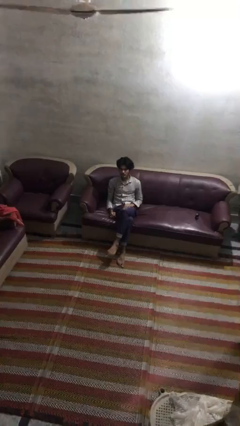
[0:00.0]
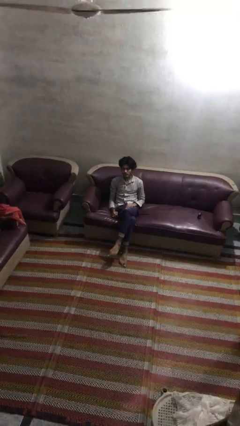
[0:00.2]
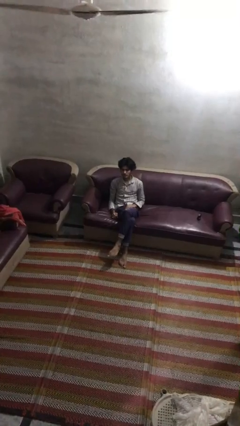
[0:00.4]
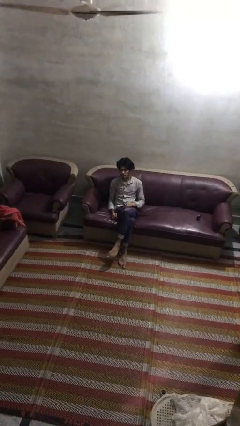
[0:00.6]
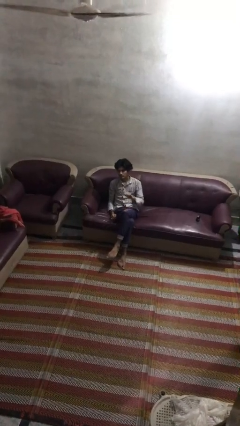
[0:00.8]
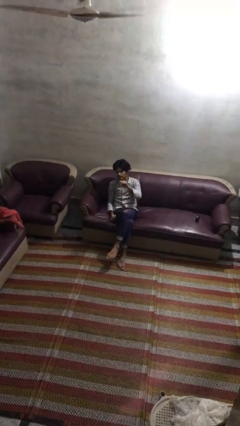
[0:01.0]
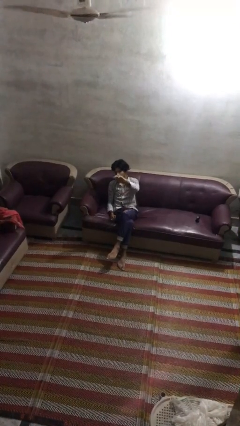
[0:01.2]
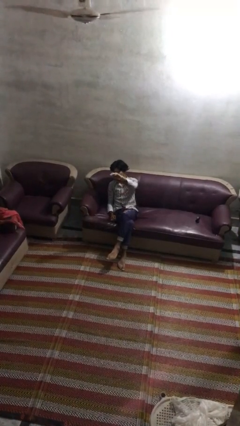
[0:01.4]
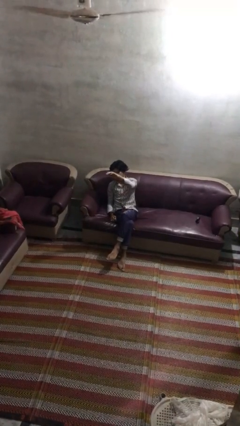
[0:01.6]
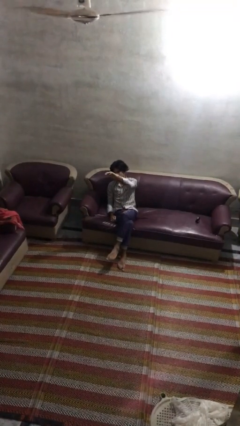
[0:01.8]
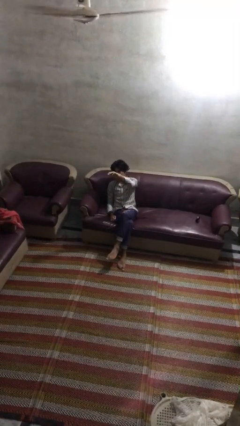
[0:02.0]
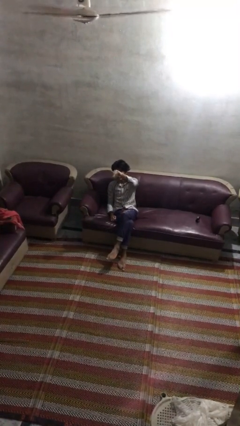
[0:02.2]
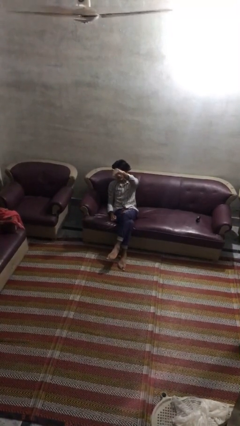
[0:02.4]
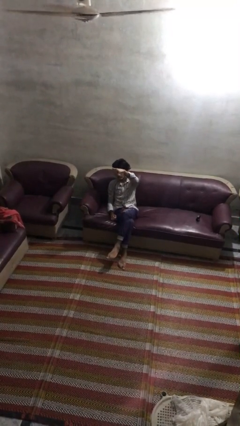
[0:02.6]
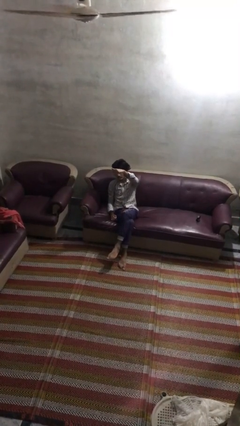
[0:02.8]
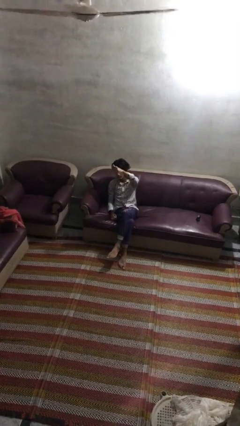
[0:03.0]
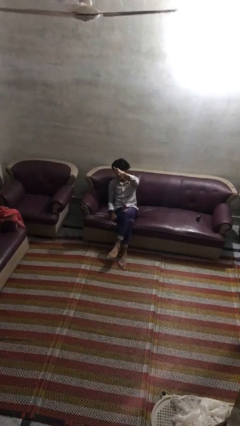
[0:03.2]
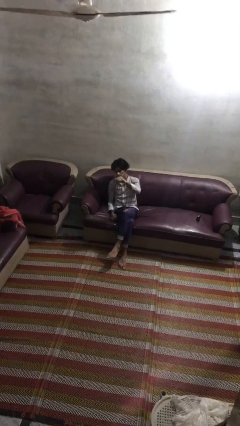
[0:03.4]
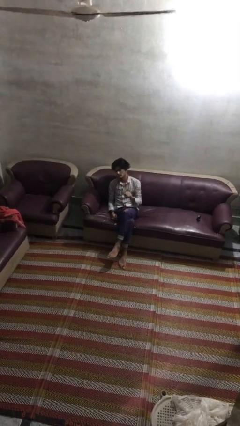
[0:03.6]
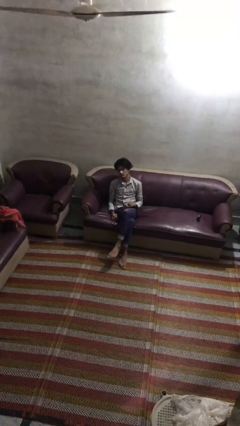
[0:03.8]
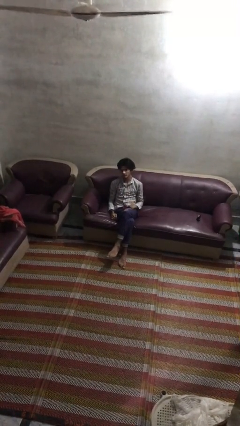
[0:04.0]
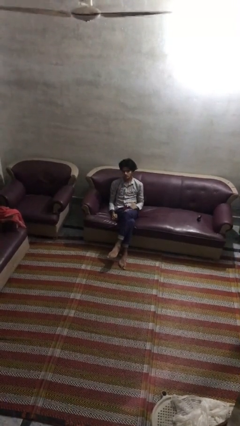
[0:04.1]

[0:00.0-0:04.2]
person gestures come here

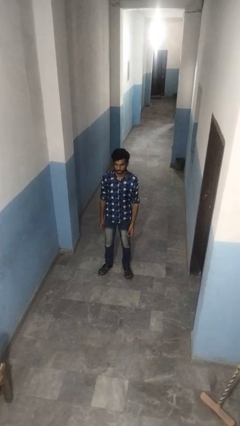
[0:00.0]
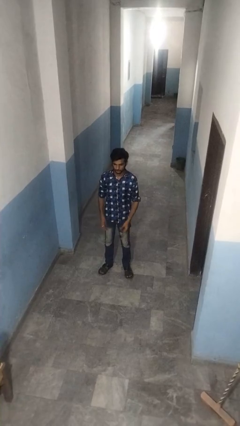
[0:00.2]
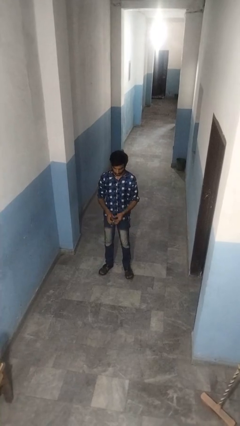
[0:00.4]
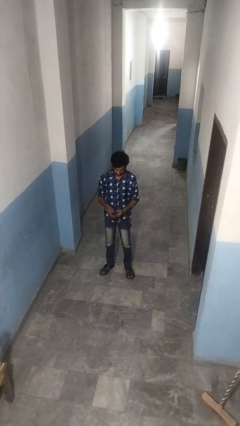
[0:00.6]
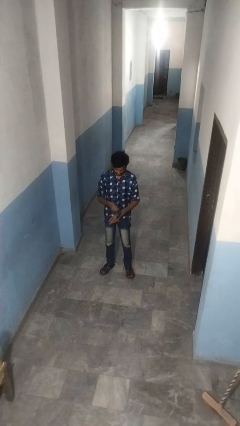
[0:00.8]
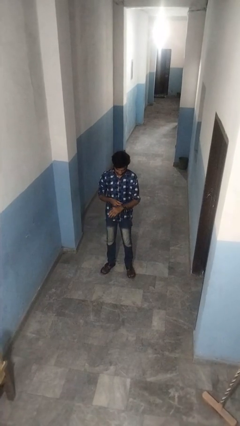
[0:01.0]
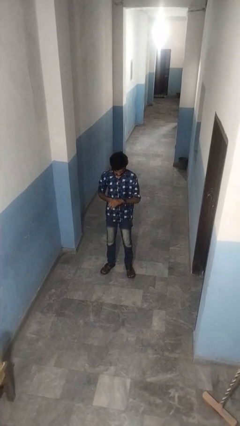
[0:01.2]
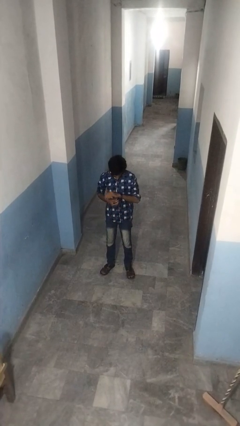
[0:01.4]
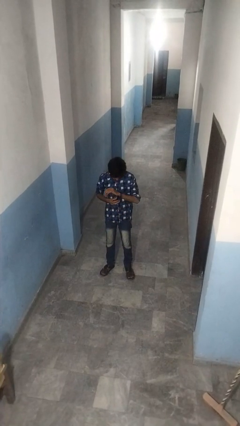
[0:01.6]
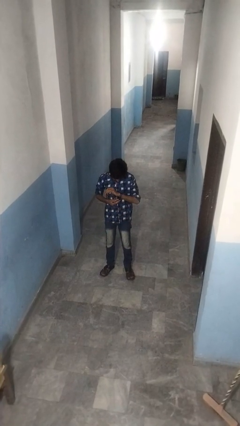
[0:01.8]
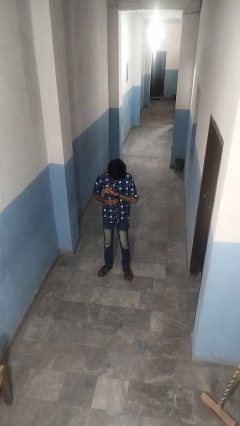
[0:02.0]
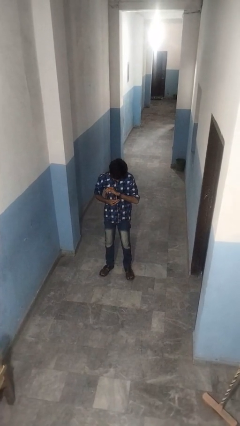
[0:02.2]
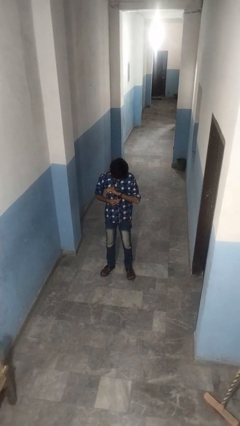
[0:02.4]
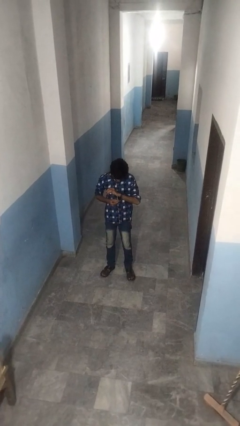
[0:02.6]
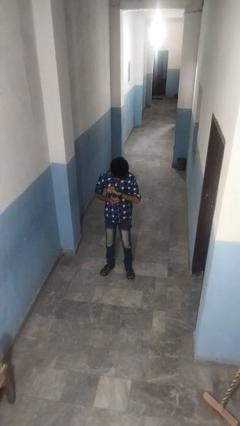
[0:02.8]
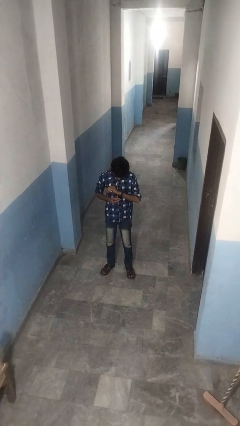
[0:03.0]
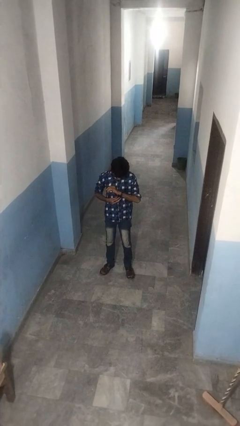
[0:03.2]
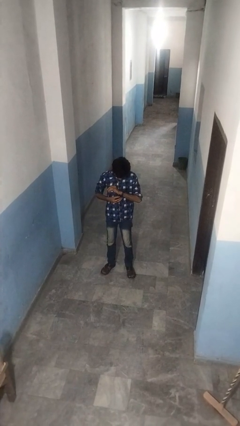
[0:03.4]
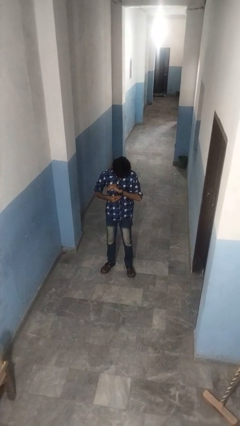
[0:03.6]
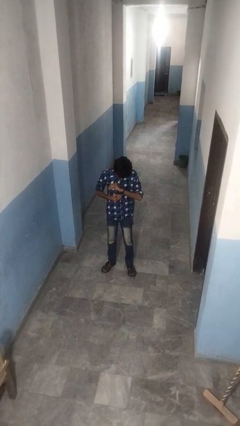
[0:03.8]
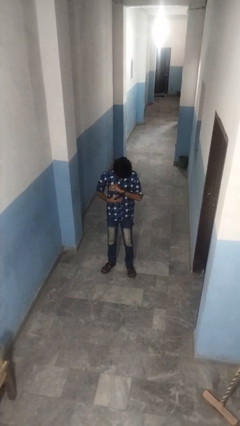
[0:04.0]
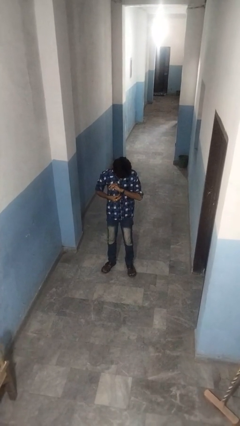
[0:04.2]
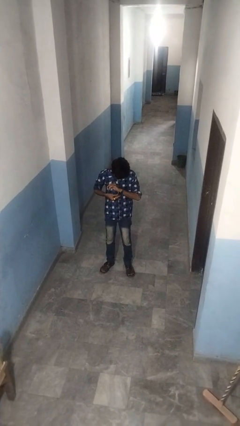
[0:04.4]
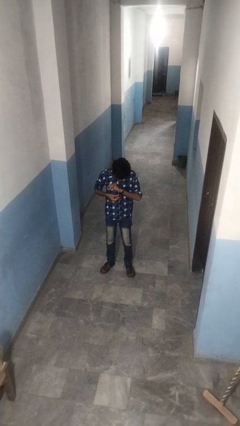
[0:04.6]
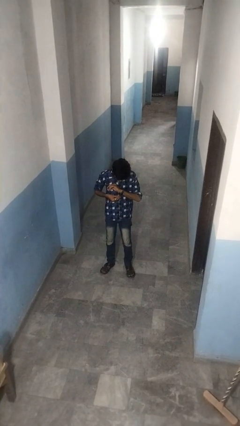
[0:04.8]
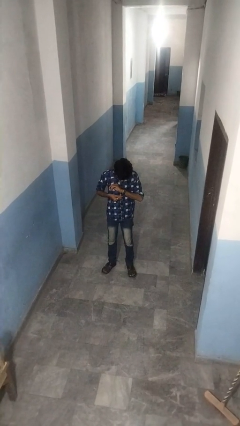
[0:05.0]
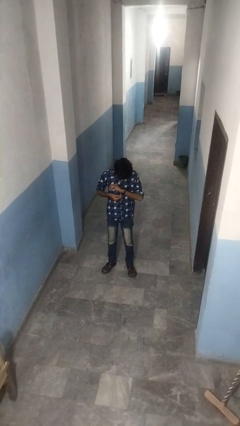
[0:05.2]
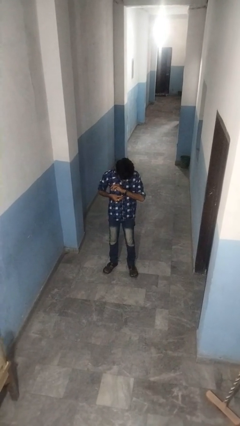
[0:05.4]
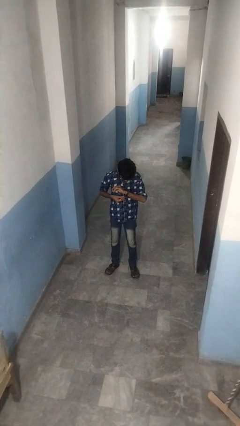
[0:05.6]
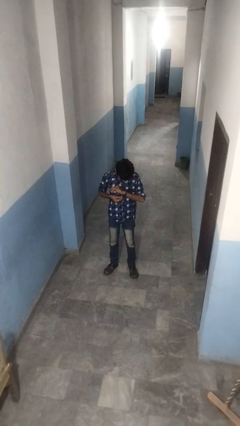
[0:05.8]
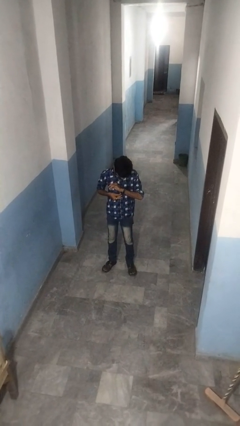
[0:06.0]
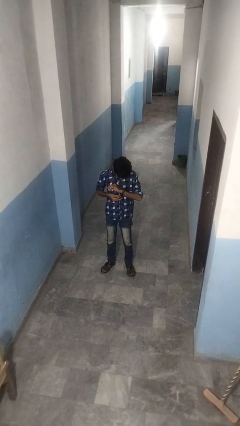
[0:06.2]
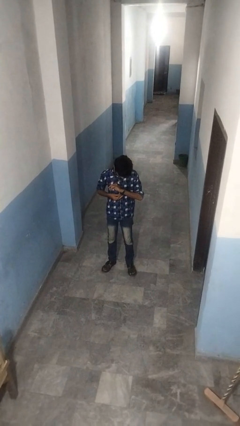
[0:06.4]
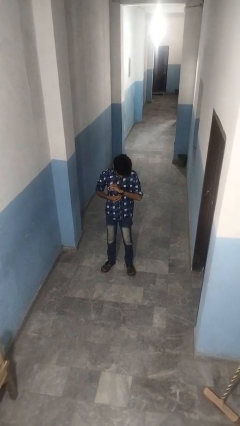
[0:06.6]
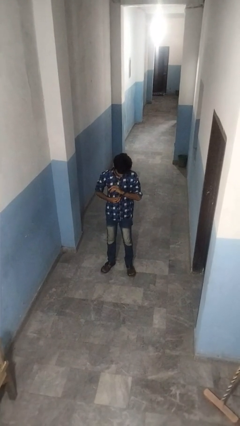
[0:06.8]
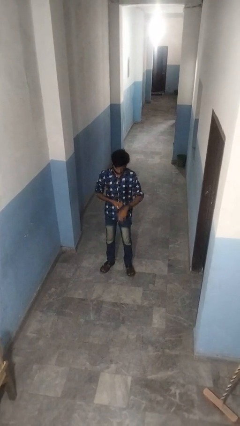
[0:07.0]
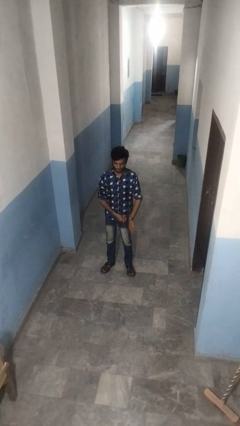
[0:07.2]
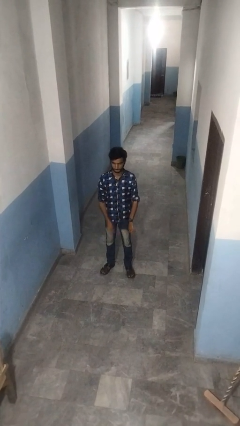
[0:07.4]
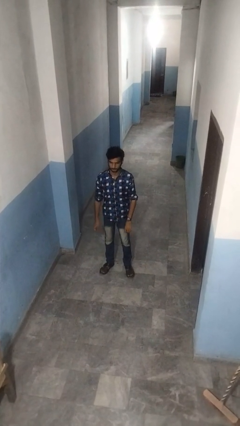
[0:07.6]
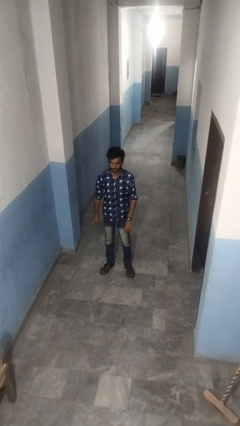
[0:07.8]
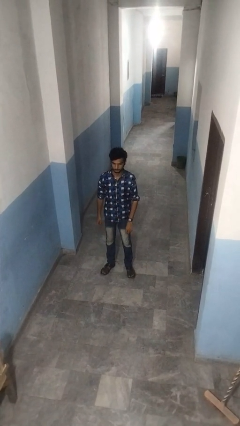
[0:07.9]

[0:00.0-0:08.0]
person puts on wristwatch

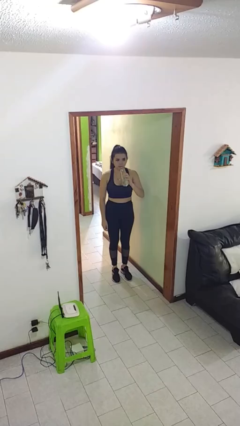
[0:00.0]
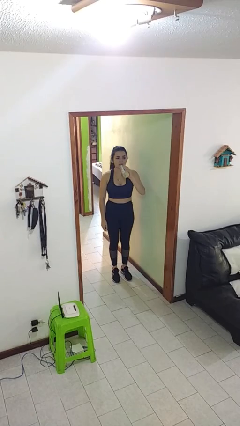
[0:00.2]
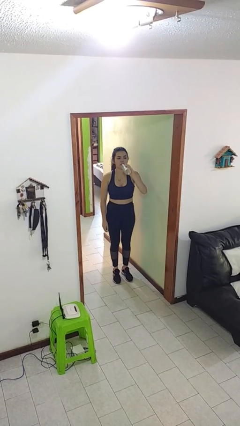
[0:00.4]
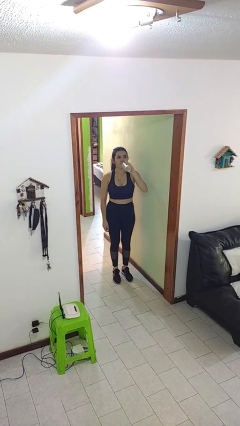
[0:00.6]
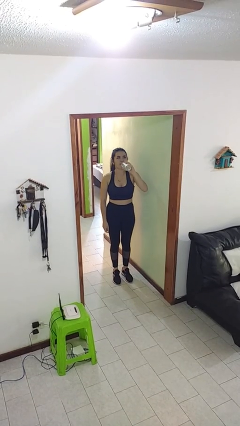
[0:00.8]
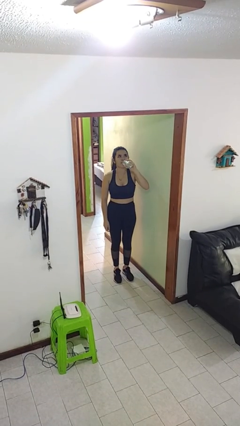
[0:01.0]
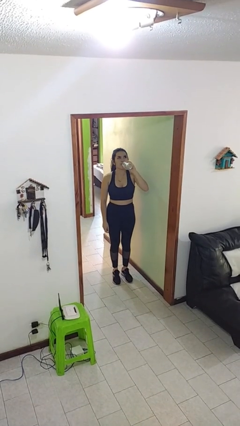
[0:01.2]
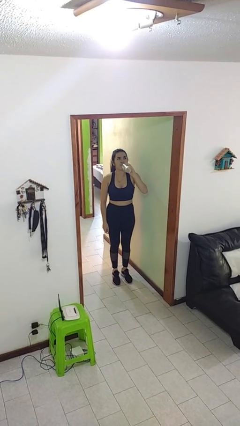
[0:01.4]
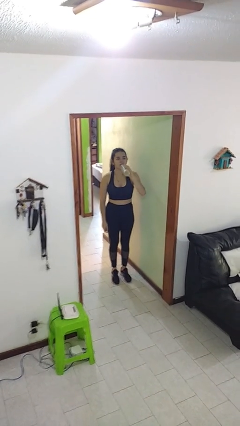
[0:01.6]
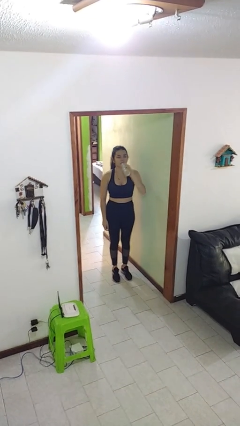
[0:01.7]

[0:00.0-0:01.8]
person drinks from bottle

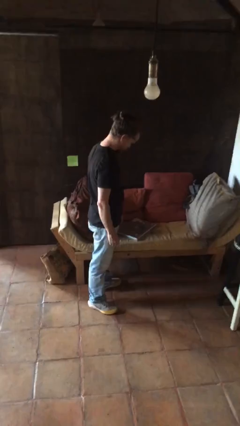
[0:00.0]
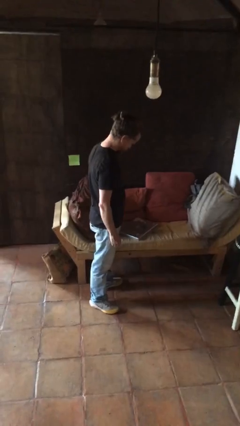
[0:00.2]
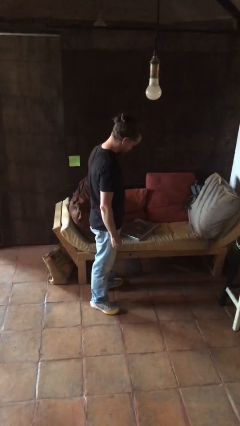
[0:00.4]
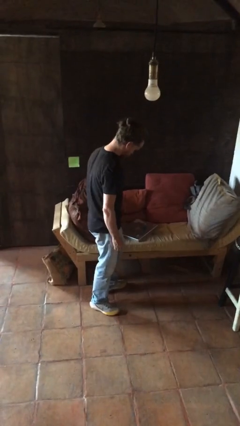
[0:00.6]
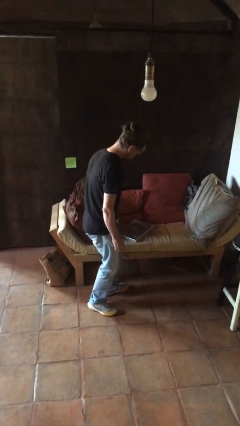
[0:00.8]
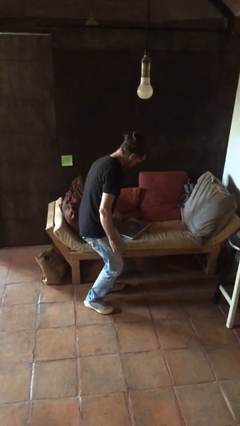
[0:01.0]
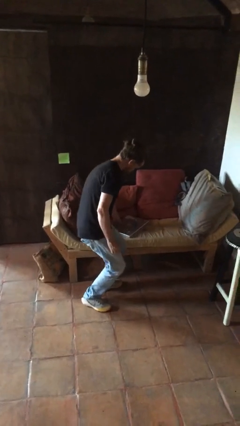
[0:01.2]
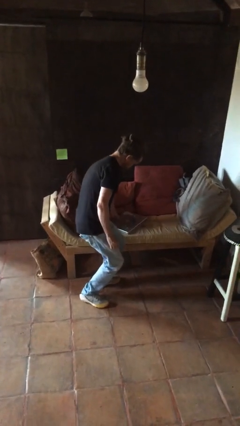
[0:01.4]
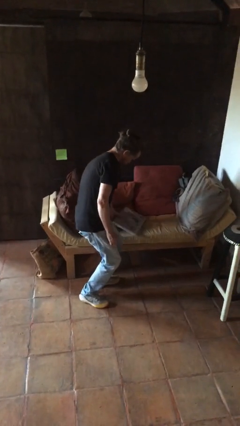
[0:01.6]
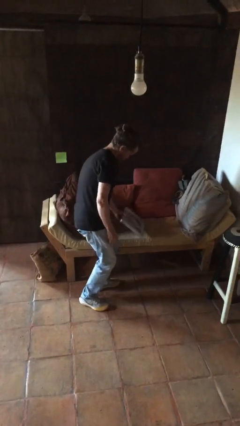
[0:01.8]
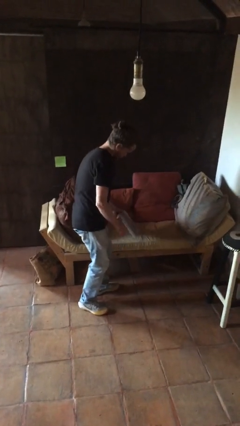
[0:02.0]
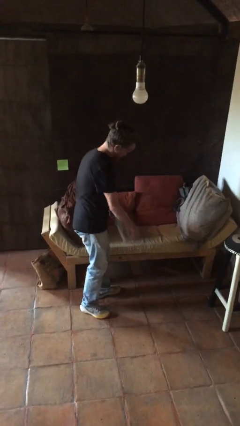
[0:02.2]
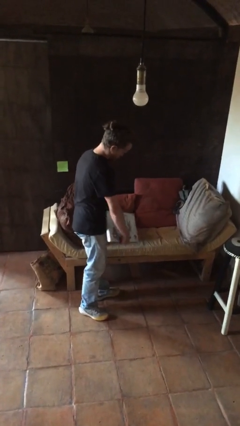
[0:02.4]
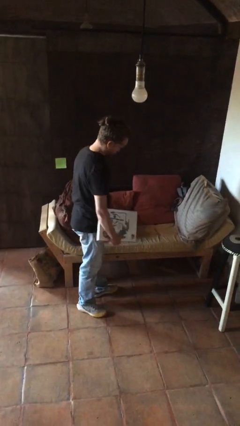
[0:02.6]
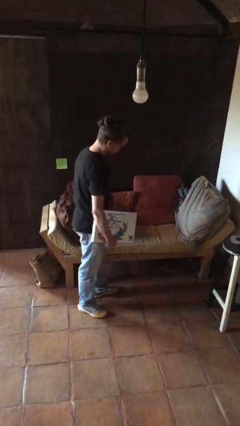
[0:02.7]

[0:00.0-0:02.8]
person picks up object from couch

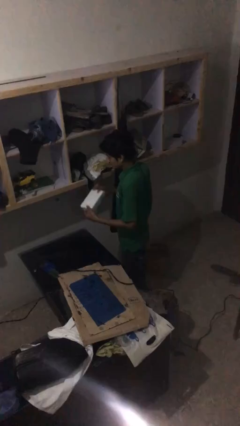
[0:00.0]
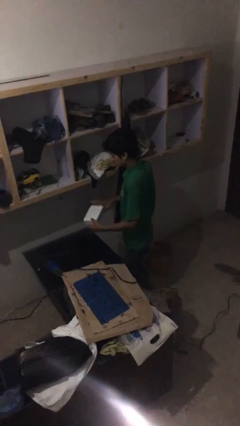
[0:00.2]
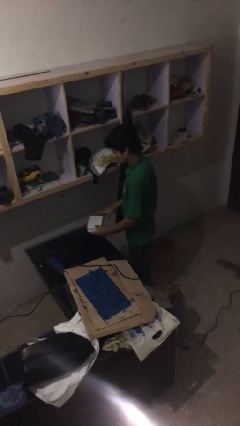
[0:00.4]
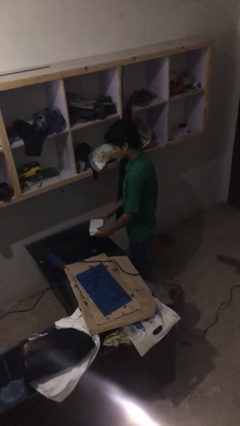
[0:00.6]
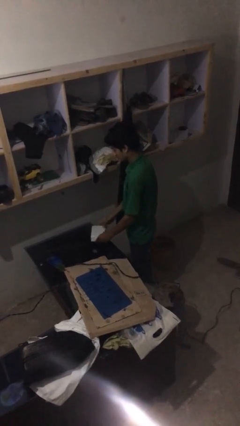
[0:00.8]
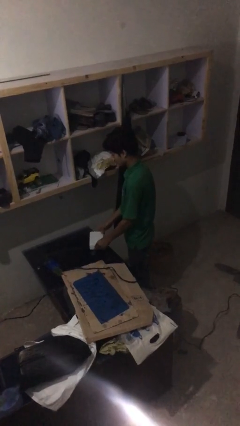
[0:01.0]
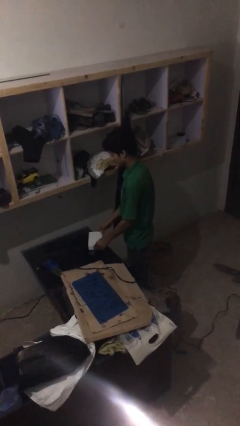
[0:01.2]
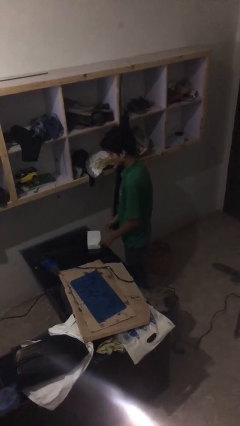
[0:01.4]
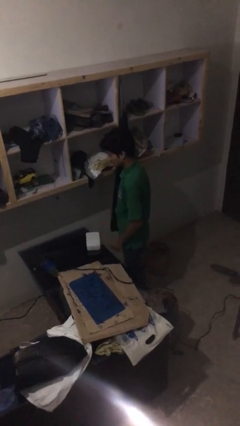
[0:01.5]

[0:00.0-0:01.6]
person puts down object on table
